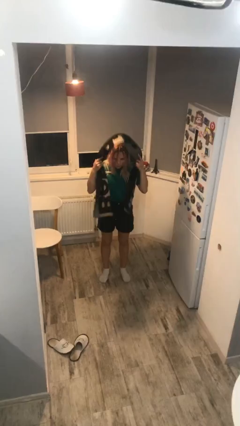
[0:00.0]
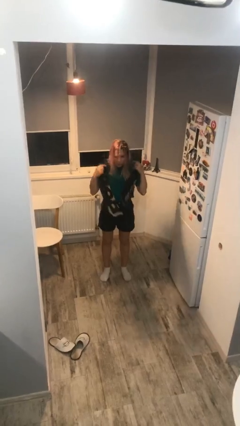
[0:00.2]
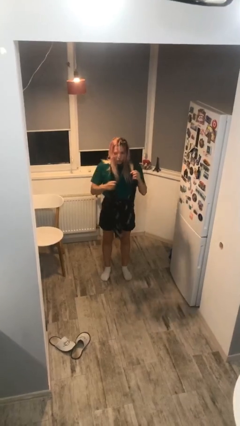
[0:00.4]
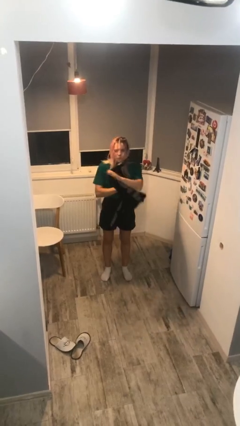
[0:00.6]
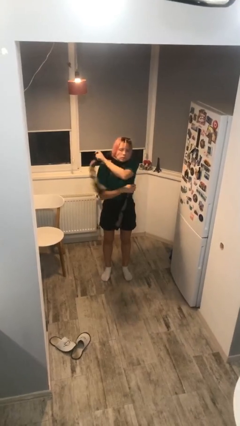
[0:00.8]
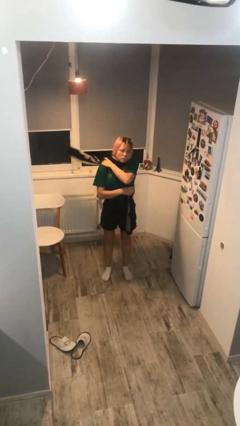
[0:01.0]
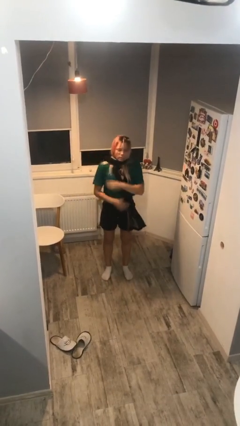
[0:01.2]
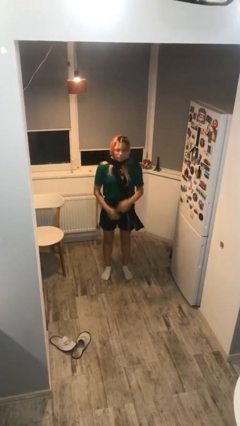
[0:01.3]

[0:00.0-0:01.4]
person puts on scarf

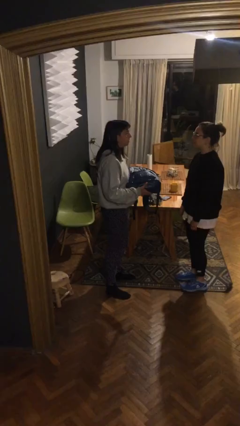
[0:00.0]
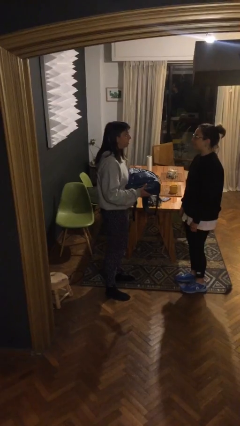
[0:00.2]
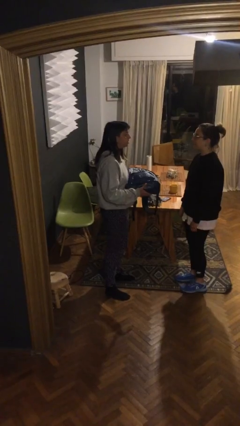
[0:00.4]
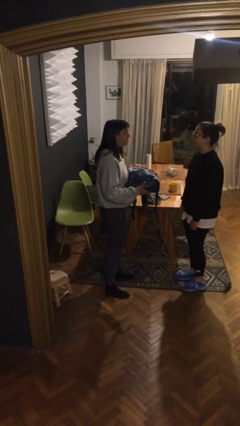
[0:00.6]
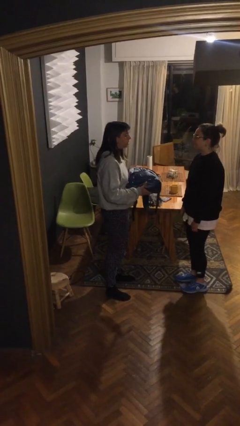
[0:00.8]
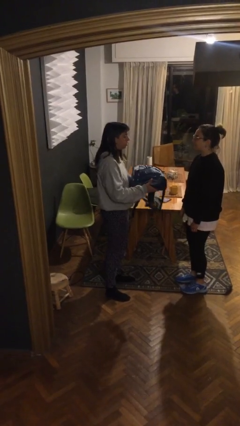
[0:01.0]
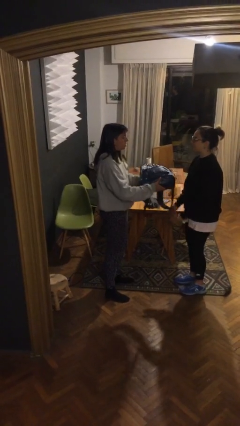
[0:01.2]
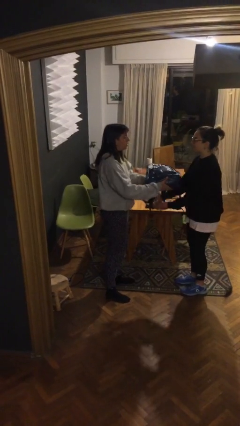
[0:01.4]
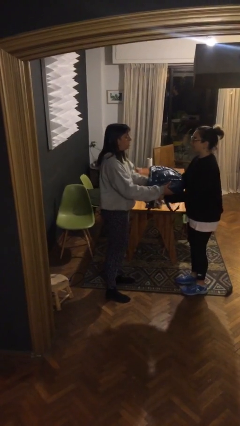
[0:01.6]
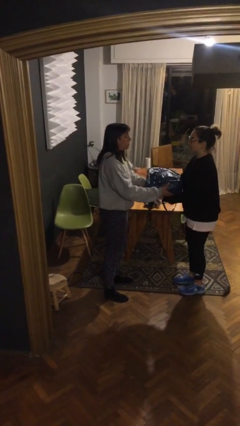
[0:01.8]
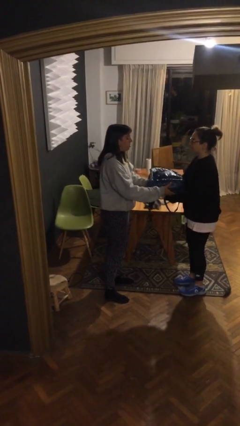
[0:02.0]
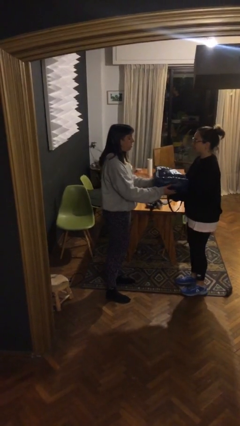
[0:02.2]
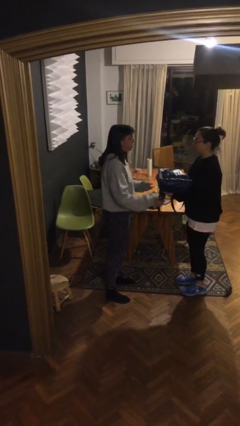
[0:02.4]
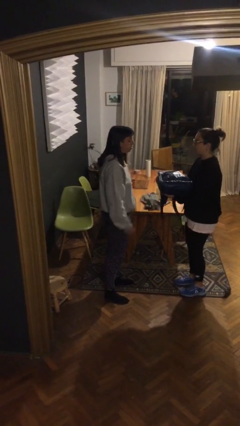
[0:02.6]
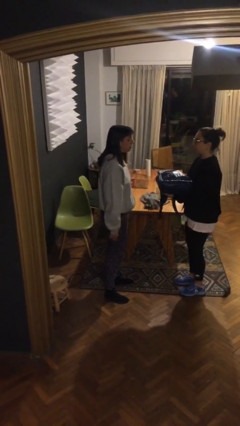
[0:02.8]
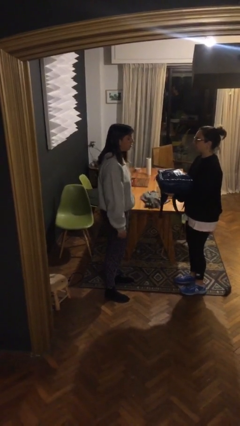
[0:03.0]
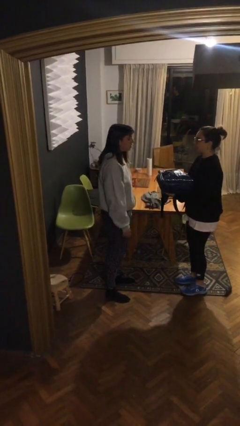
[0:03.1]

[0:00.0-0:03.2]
person transfers object to person

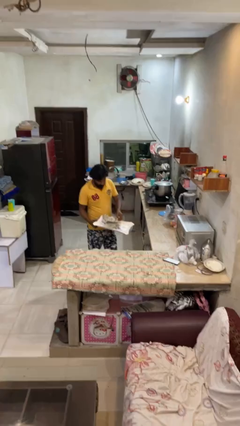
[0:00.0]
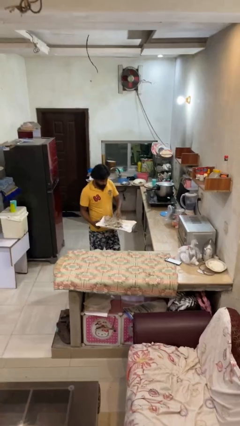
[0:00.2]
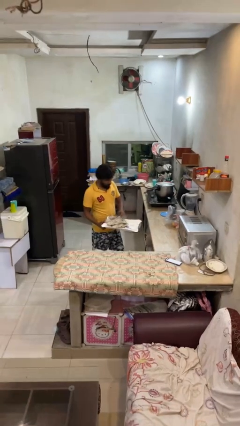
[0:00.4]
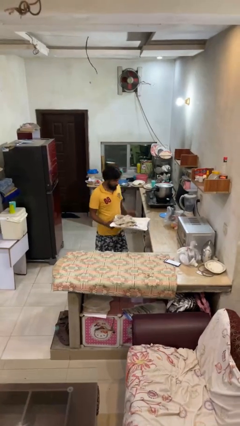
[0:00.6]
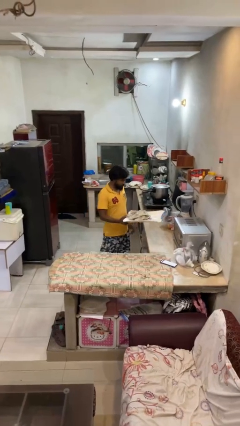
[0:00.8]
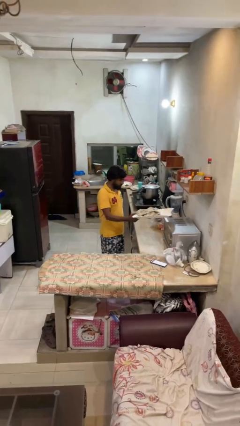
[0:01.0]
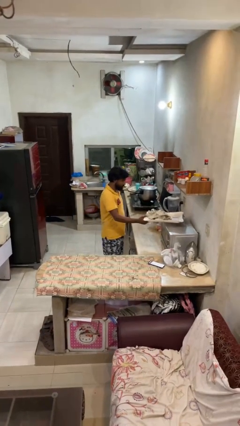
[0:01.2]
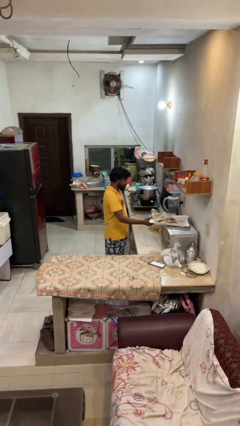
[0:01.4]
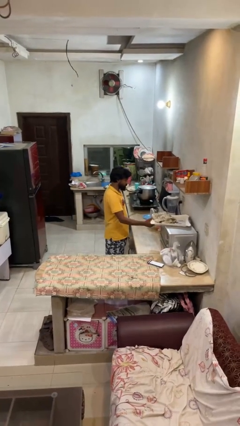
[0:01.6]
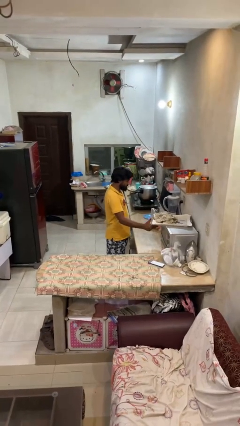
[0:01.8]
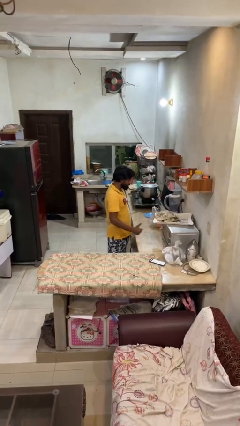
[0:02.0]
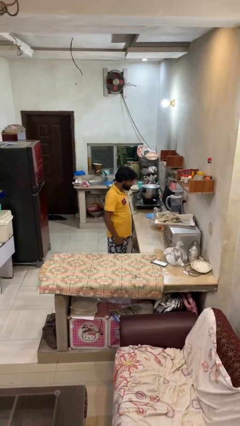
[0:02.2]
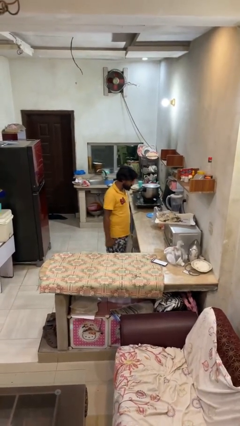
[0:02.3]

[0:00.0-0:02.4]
person puts down object on countertop

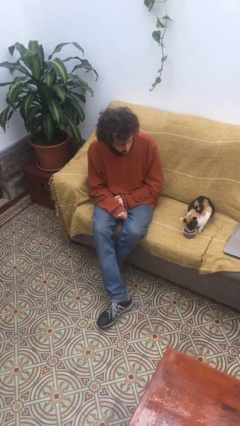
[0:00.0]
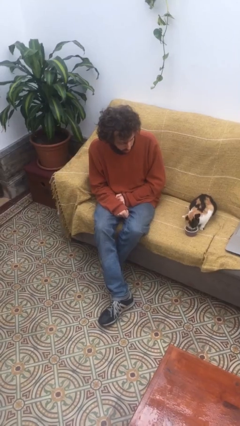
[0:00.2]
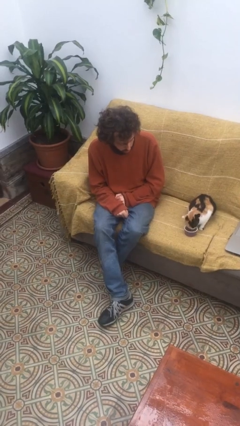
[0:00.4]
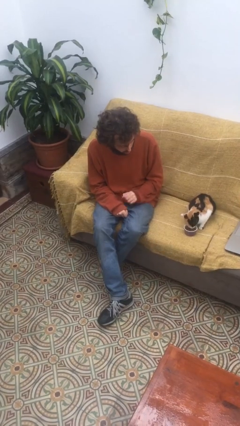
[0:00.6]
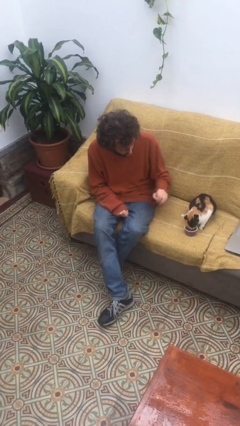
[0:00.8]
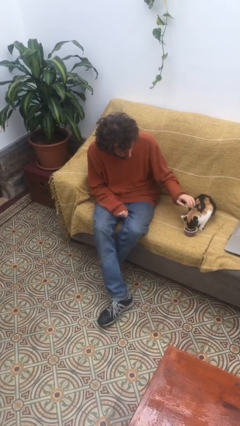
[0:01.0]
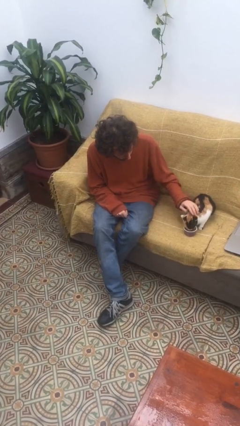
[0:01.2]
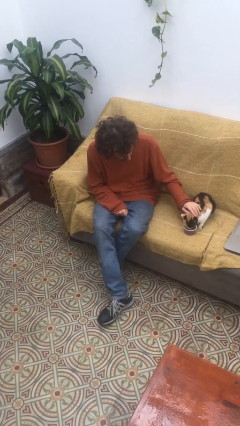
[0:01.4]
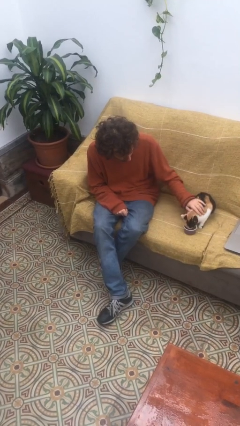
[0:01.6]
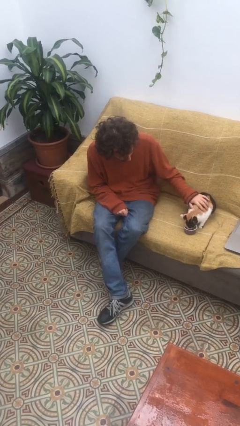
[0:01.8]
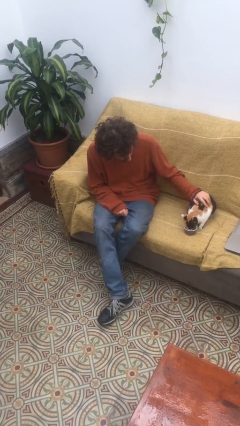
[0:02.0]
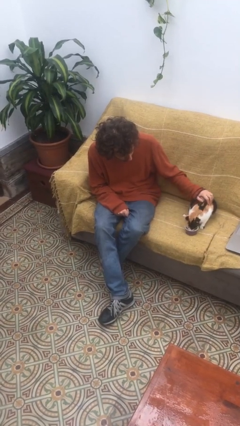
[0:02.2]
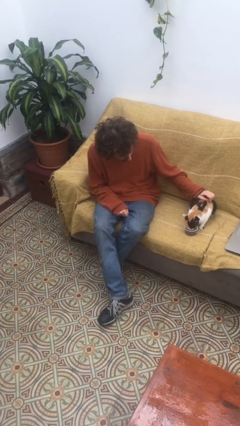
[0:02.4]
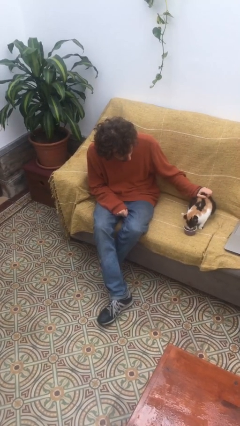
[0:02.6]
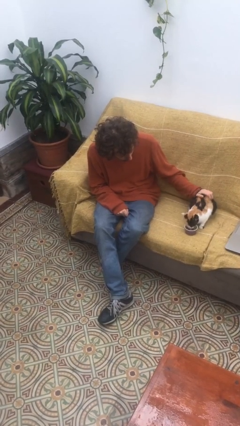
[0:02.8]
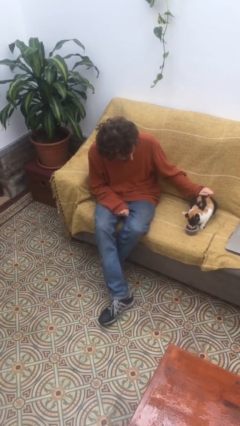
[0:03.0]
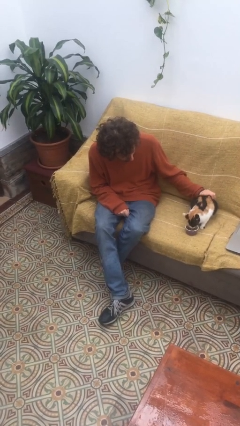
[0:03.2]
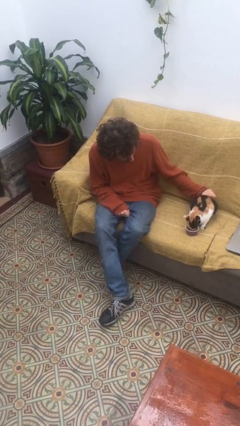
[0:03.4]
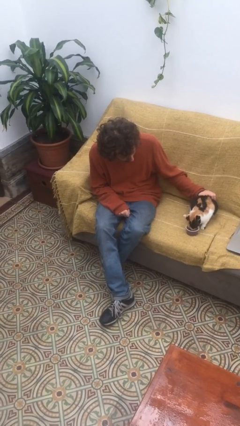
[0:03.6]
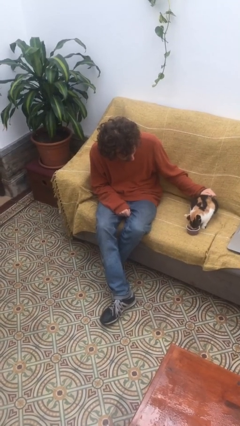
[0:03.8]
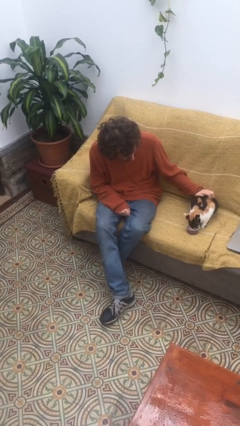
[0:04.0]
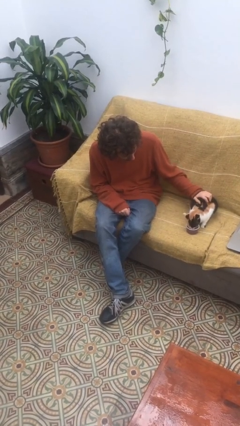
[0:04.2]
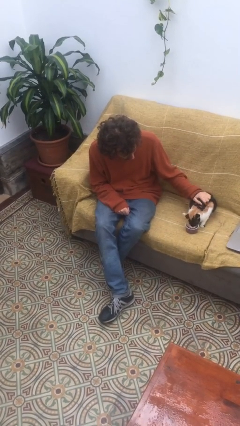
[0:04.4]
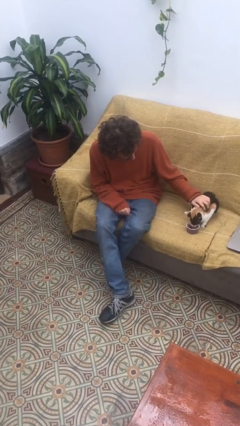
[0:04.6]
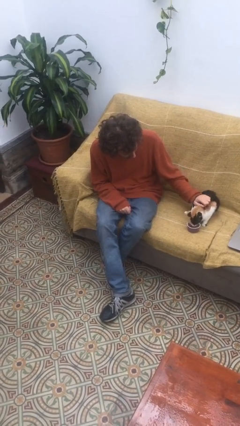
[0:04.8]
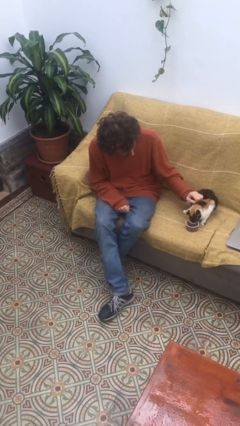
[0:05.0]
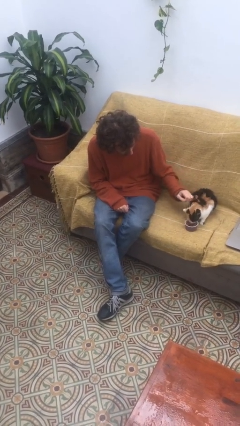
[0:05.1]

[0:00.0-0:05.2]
person pets cat

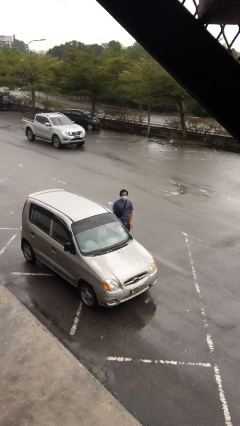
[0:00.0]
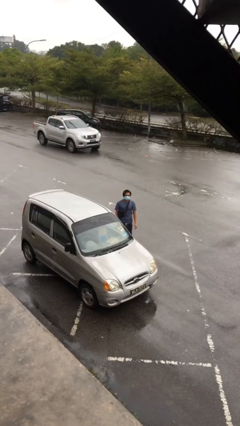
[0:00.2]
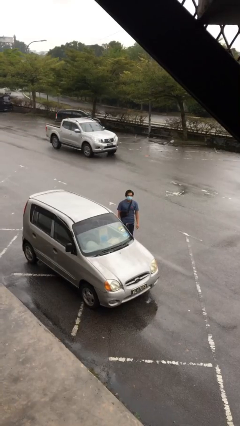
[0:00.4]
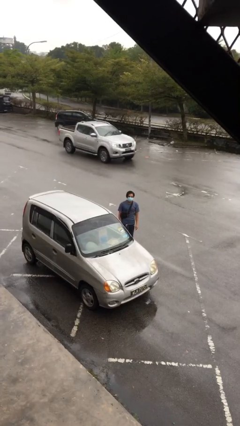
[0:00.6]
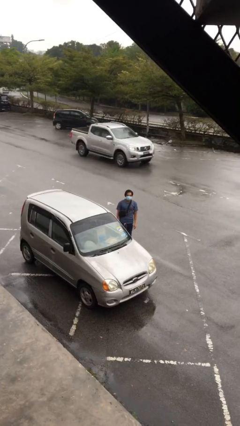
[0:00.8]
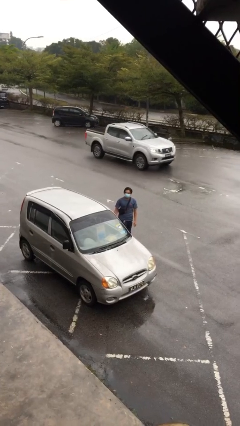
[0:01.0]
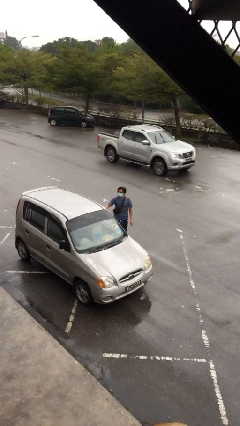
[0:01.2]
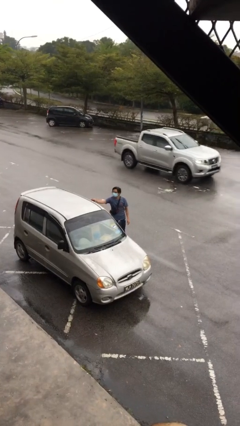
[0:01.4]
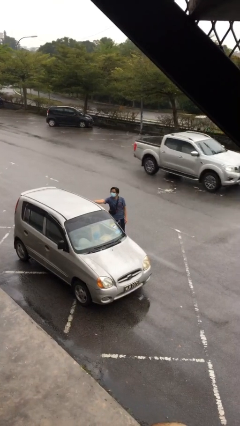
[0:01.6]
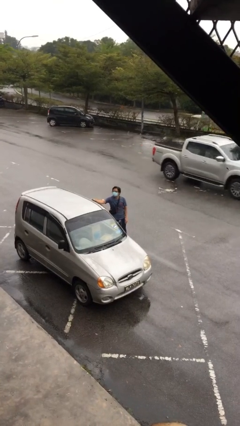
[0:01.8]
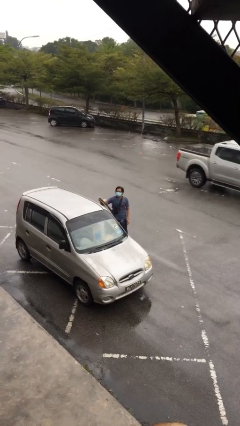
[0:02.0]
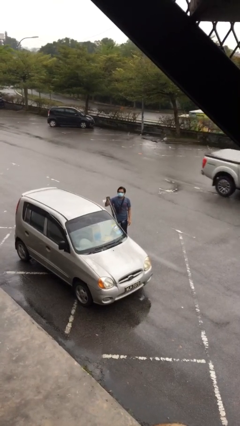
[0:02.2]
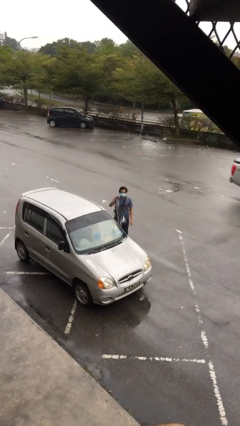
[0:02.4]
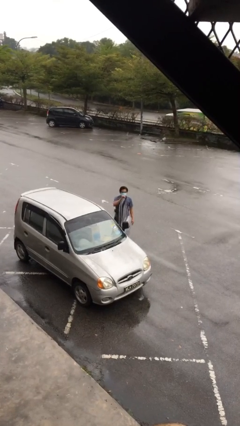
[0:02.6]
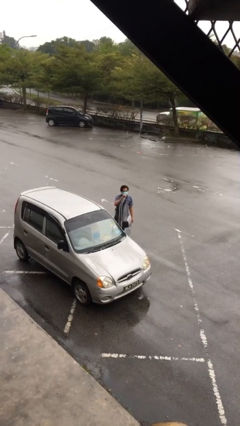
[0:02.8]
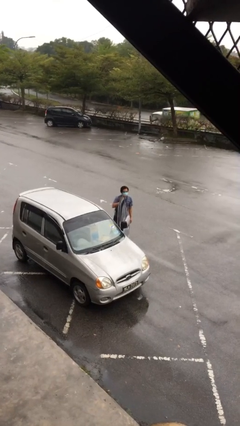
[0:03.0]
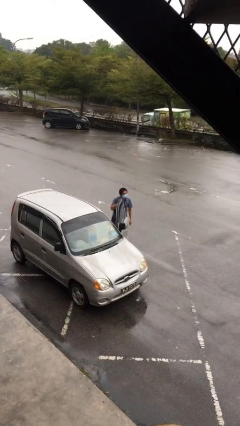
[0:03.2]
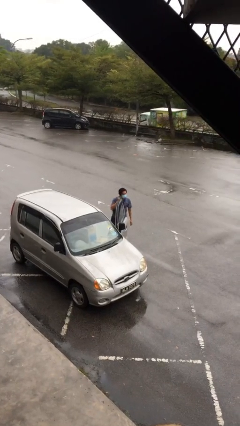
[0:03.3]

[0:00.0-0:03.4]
person opens car door

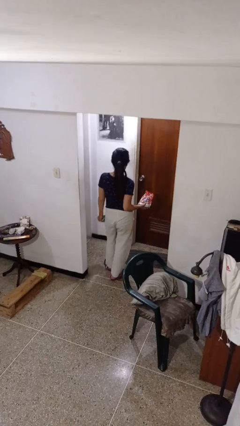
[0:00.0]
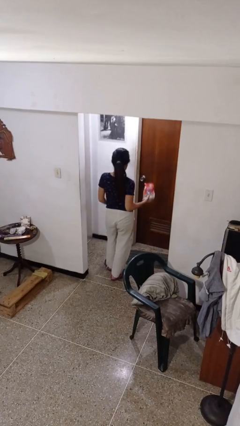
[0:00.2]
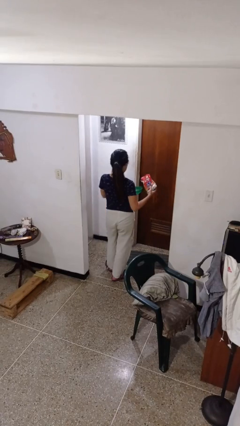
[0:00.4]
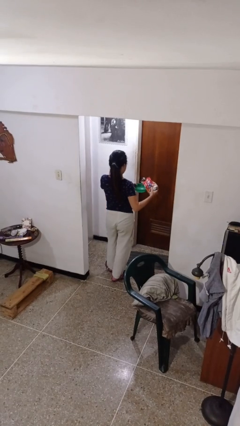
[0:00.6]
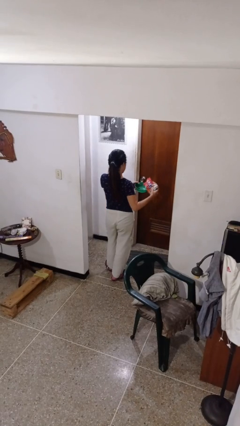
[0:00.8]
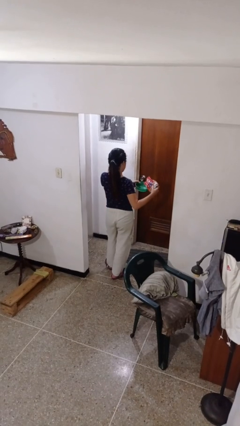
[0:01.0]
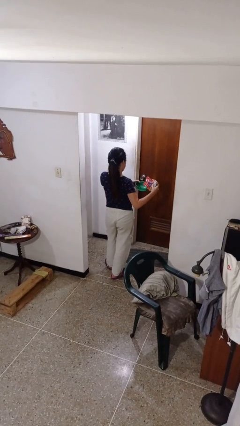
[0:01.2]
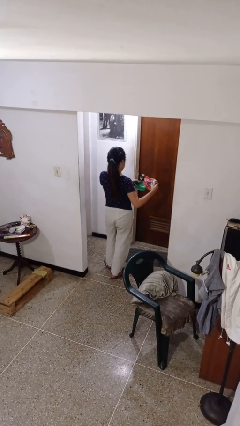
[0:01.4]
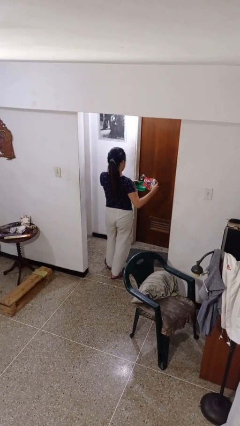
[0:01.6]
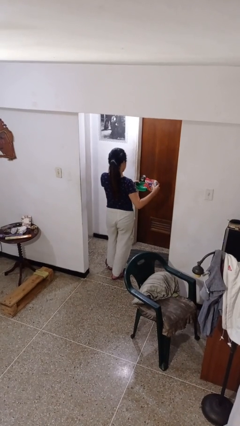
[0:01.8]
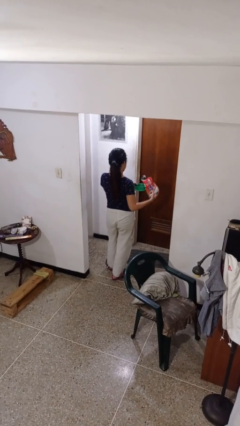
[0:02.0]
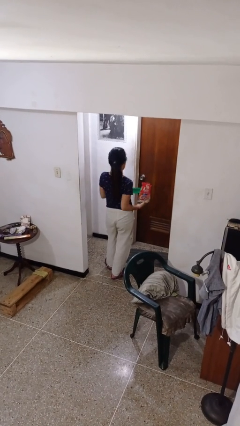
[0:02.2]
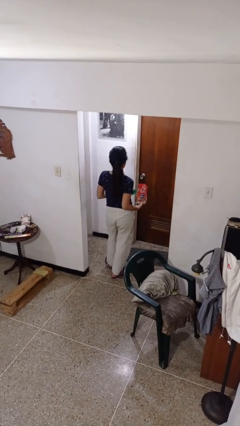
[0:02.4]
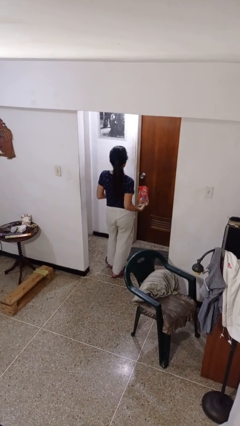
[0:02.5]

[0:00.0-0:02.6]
person pours into bowl
